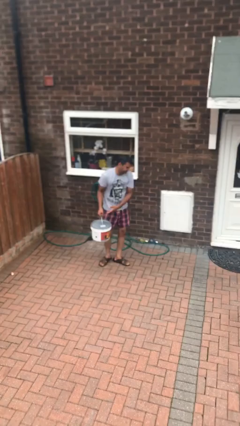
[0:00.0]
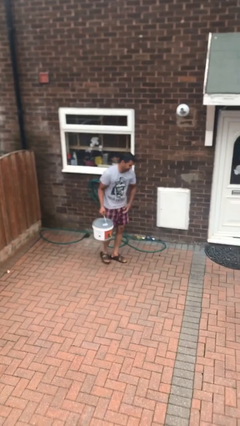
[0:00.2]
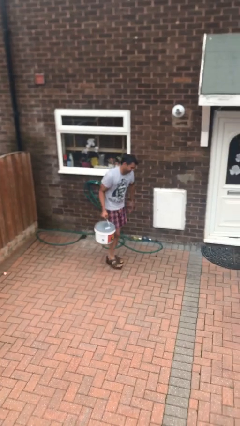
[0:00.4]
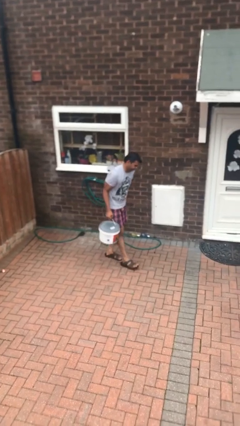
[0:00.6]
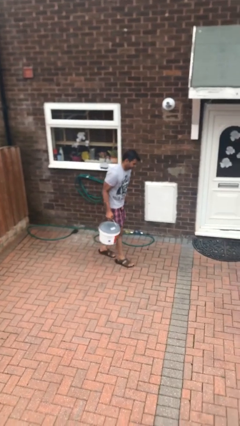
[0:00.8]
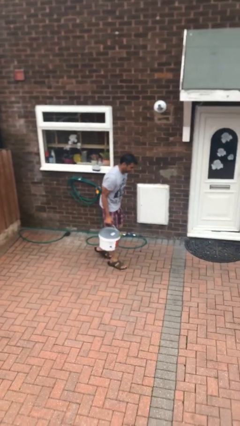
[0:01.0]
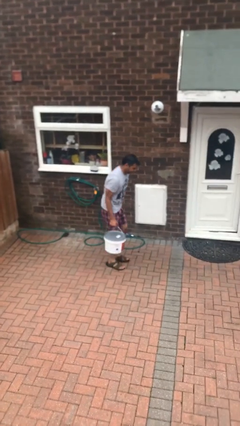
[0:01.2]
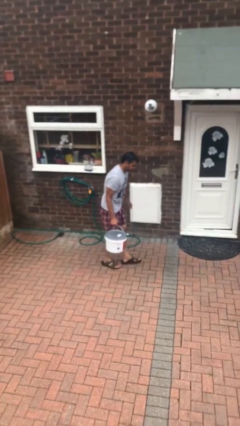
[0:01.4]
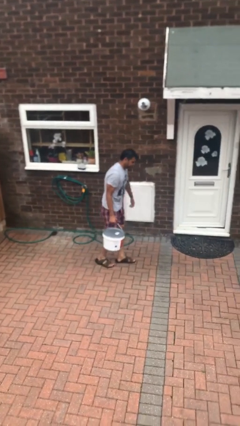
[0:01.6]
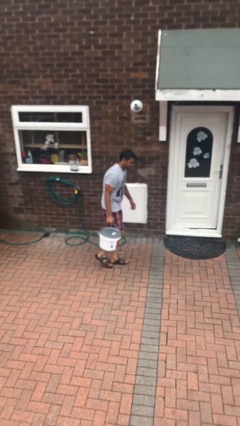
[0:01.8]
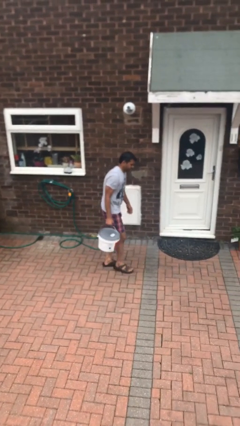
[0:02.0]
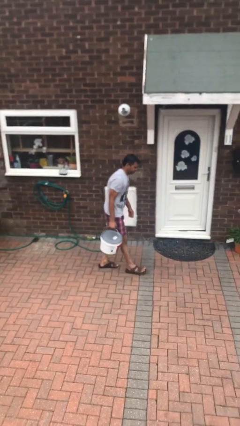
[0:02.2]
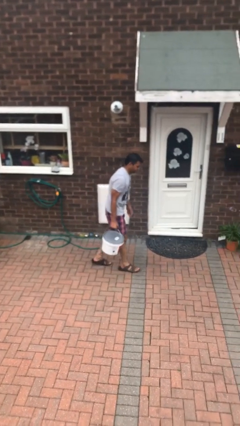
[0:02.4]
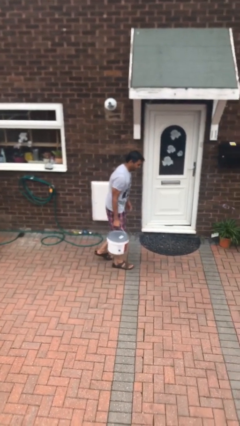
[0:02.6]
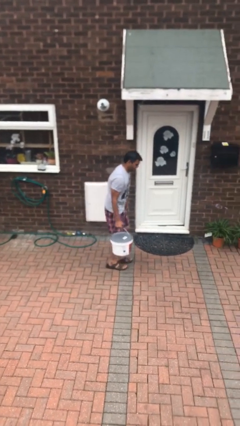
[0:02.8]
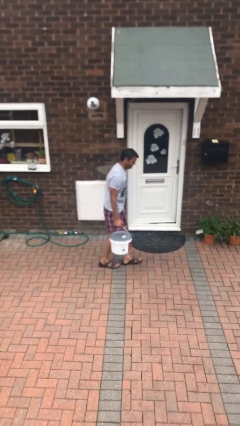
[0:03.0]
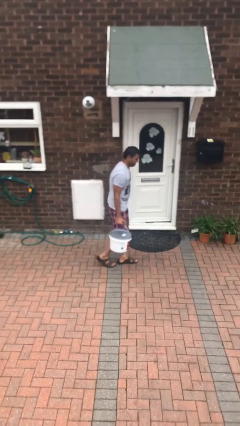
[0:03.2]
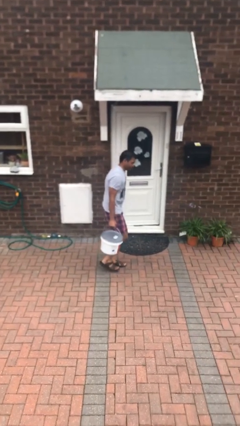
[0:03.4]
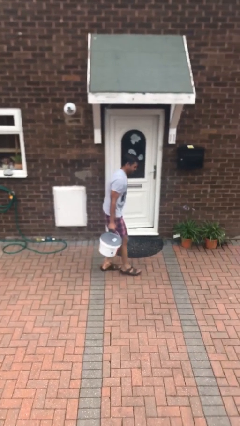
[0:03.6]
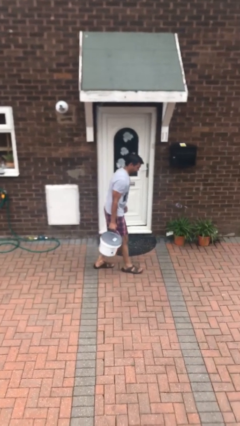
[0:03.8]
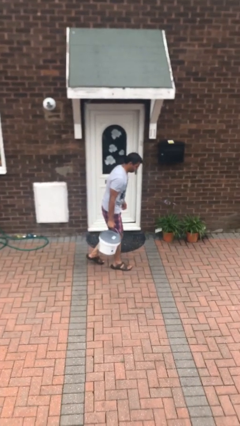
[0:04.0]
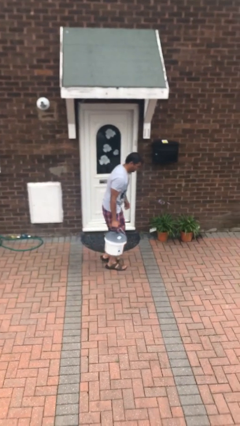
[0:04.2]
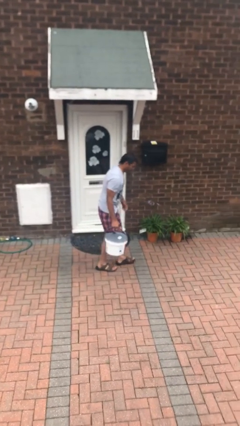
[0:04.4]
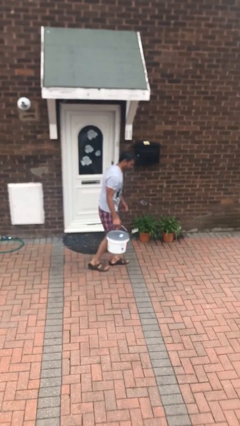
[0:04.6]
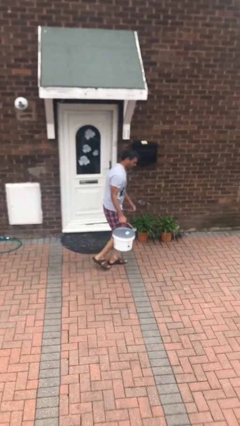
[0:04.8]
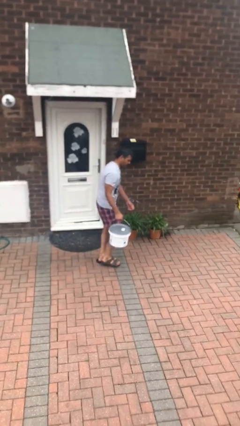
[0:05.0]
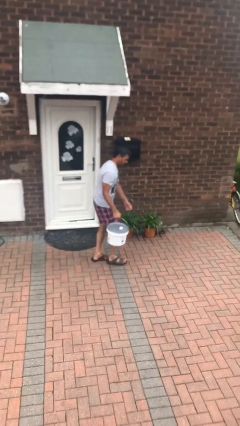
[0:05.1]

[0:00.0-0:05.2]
person carries heavy object

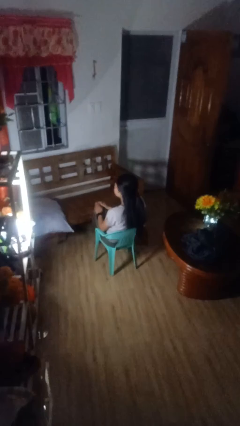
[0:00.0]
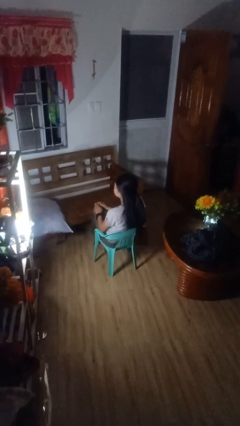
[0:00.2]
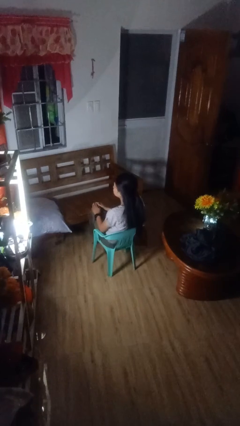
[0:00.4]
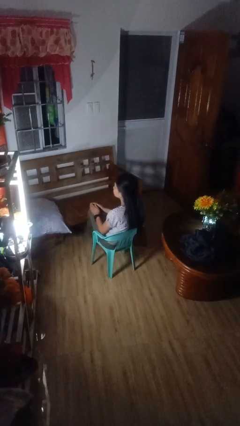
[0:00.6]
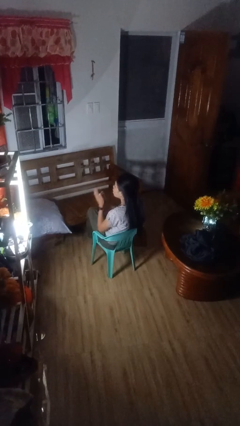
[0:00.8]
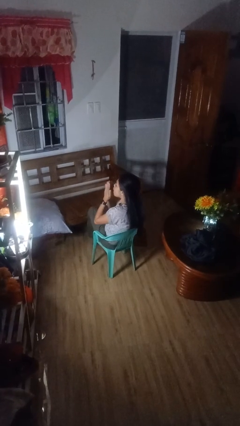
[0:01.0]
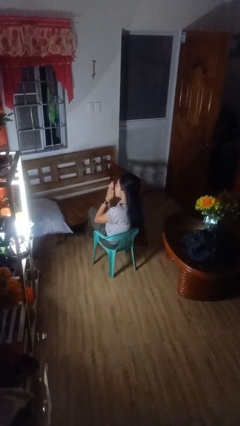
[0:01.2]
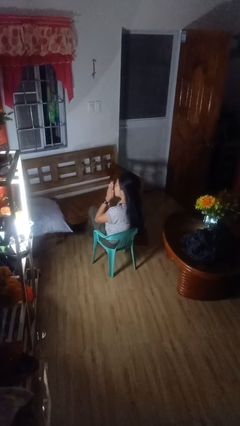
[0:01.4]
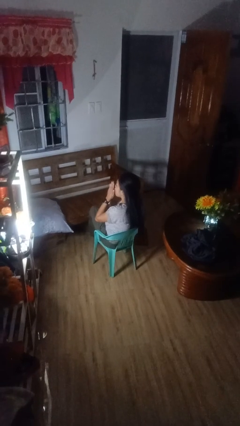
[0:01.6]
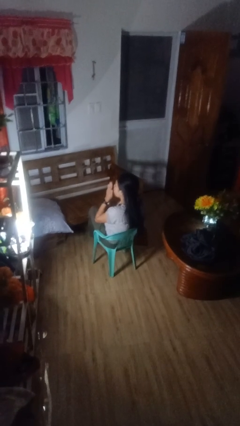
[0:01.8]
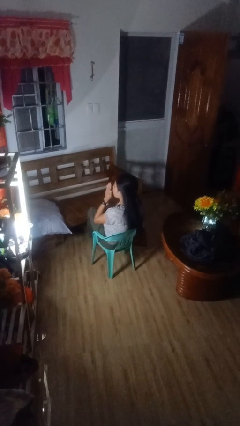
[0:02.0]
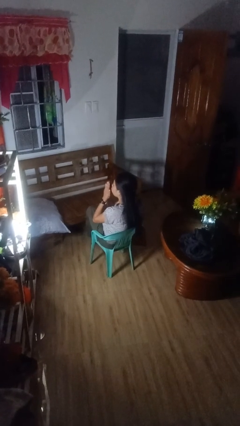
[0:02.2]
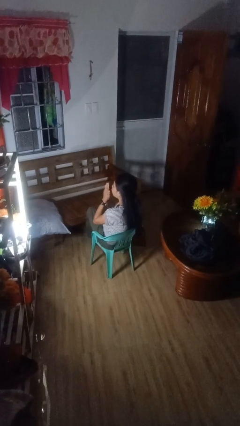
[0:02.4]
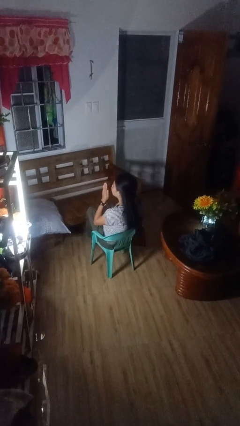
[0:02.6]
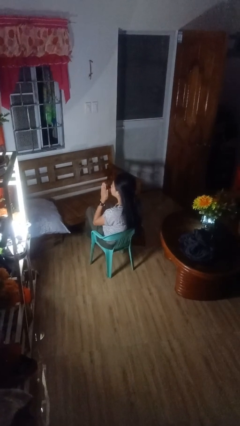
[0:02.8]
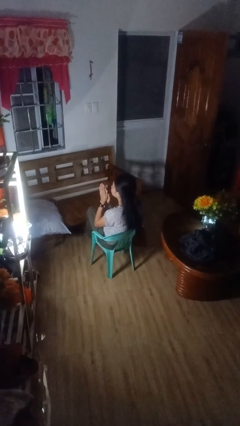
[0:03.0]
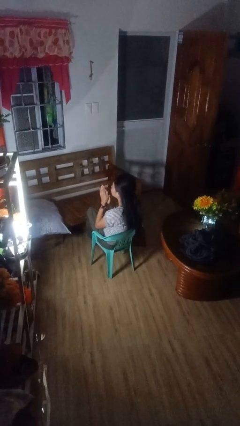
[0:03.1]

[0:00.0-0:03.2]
person blows into hands

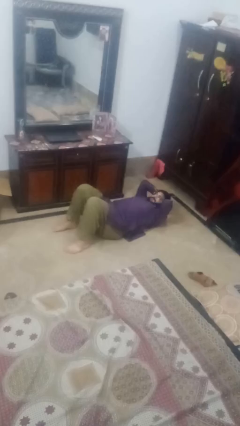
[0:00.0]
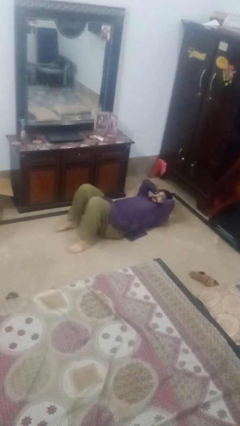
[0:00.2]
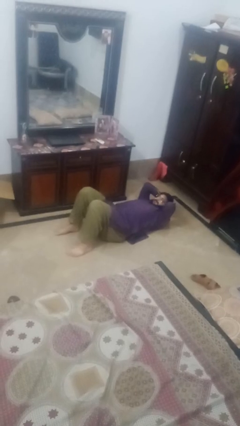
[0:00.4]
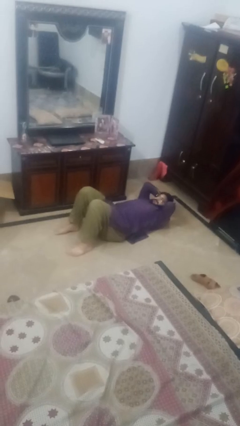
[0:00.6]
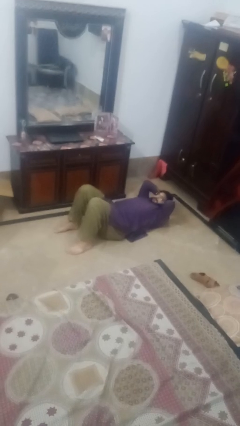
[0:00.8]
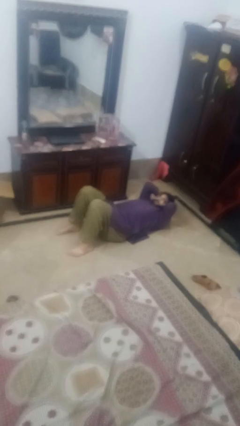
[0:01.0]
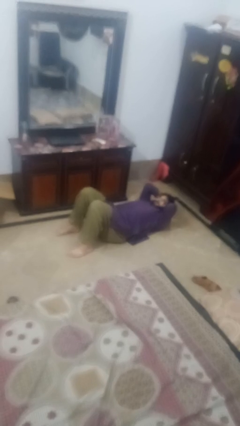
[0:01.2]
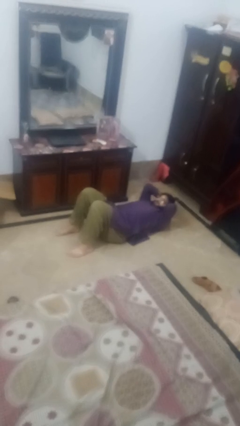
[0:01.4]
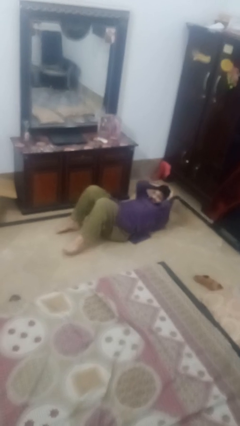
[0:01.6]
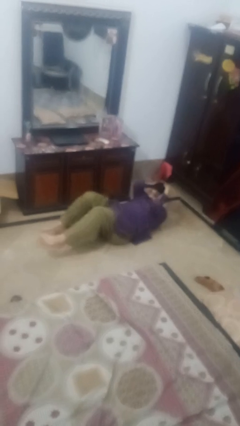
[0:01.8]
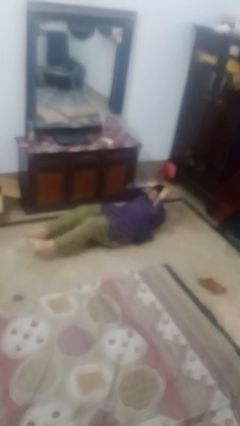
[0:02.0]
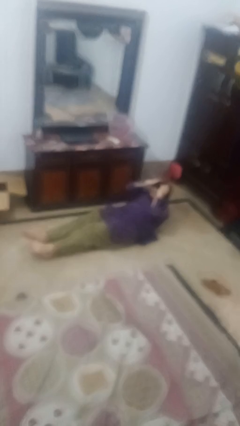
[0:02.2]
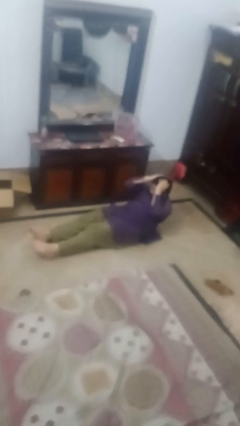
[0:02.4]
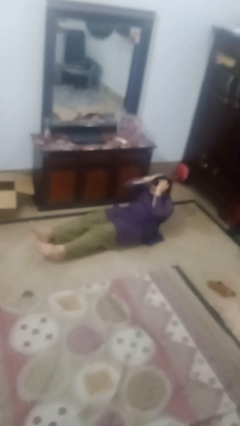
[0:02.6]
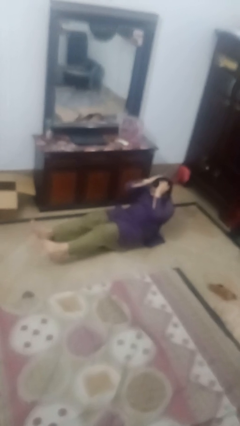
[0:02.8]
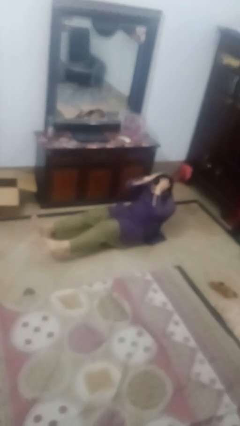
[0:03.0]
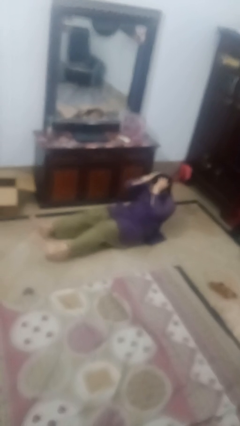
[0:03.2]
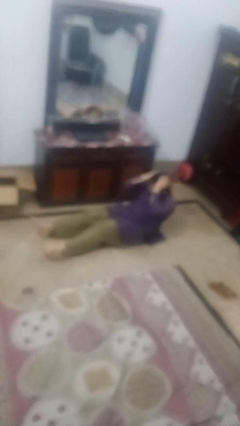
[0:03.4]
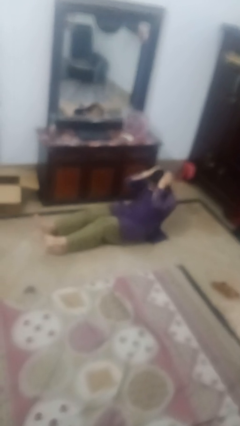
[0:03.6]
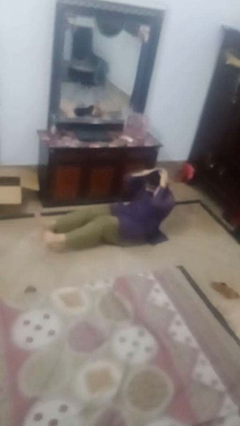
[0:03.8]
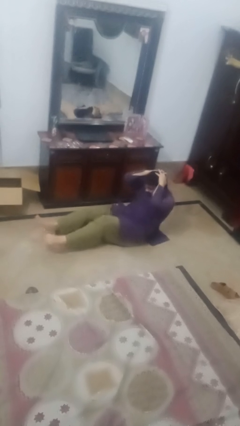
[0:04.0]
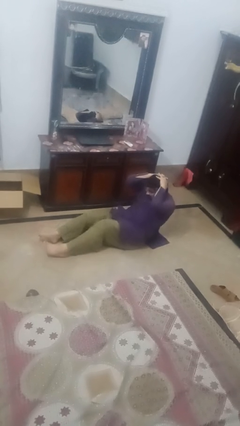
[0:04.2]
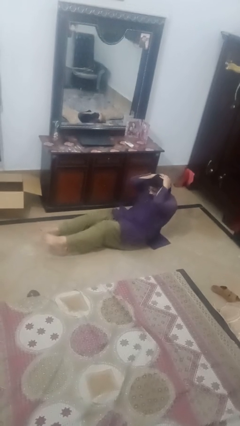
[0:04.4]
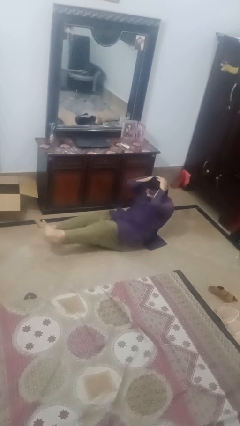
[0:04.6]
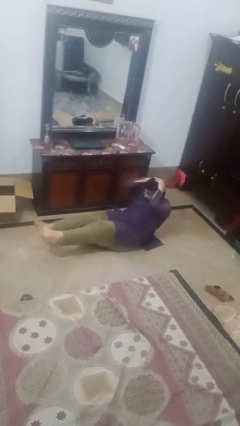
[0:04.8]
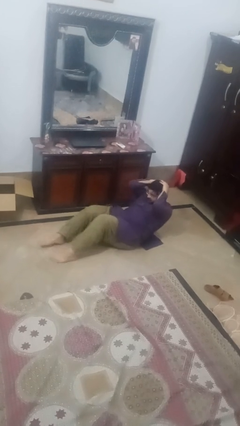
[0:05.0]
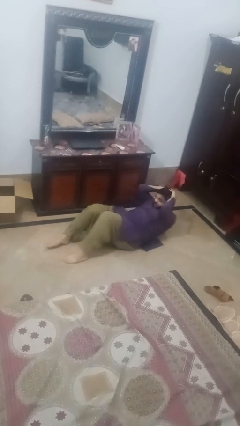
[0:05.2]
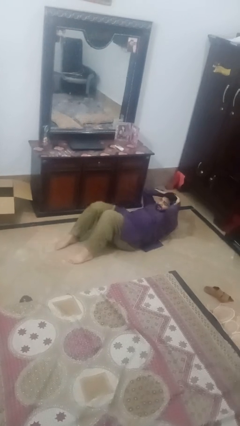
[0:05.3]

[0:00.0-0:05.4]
person exercises with situp

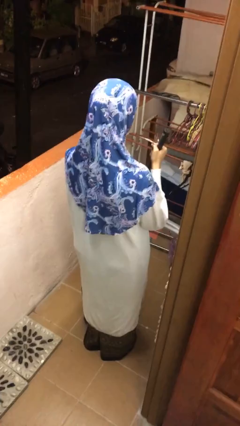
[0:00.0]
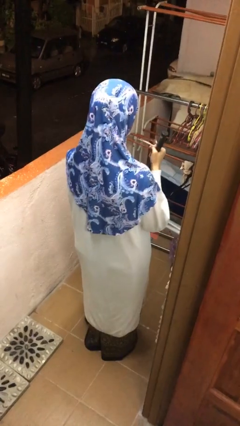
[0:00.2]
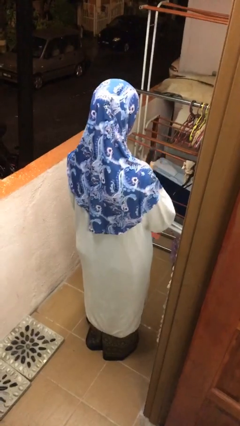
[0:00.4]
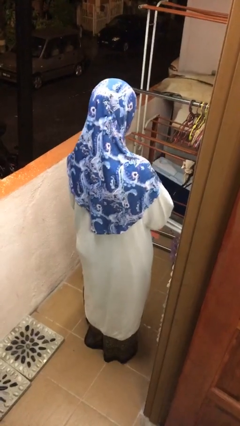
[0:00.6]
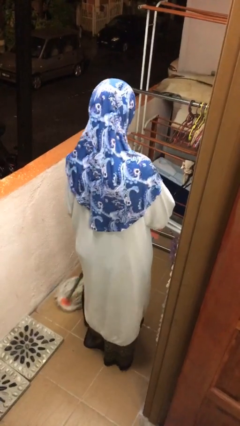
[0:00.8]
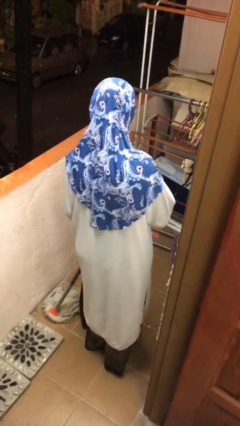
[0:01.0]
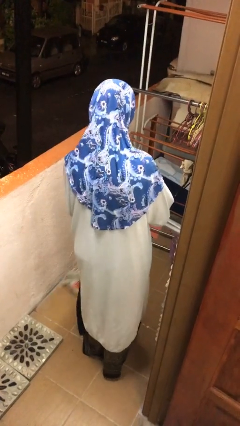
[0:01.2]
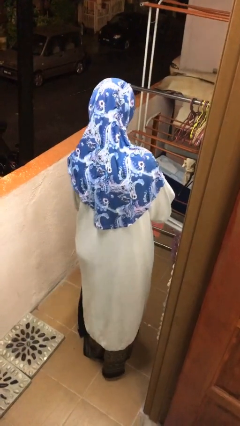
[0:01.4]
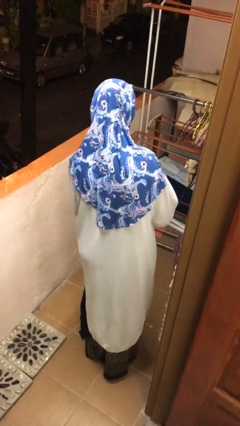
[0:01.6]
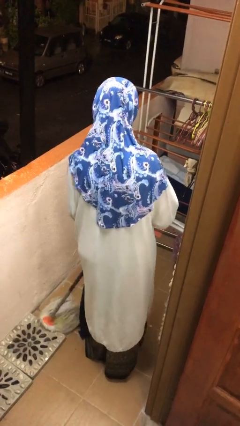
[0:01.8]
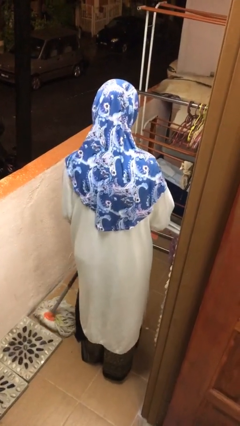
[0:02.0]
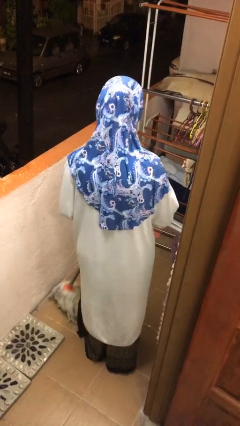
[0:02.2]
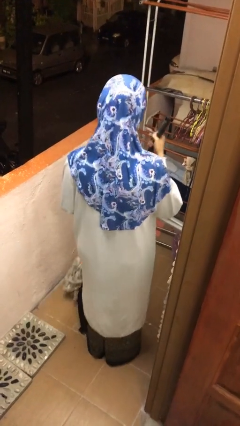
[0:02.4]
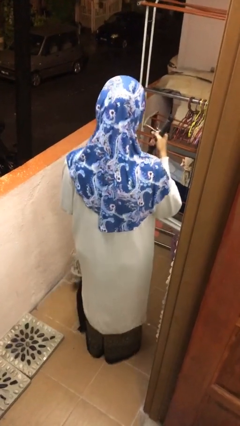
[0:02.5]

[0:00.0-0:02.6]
person mops

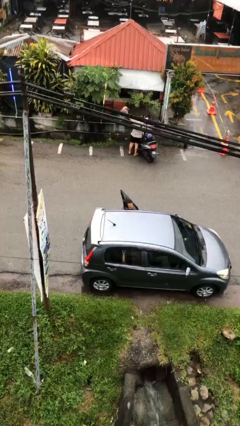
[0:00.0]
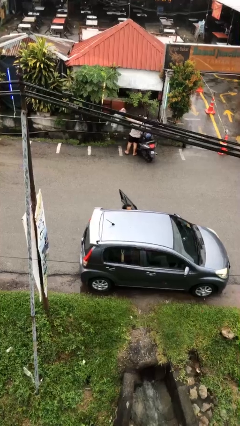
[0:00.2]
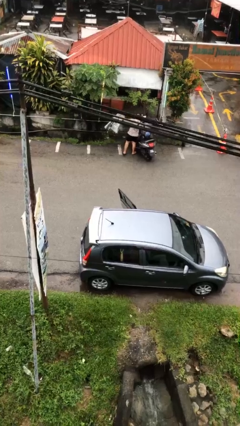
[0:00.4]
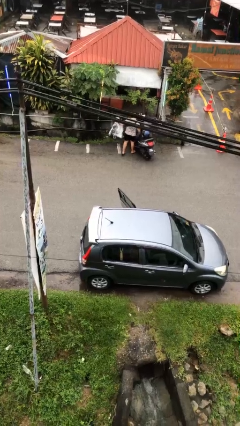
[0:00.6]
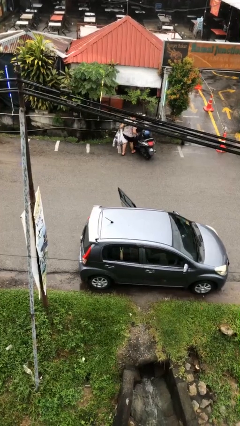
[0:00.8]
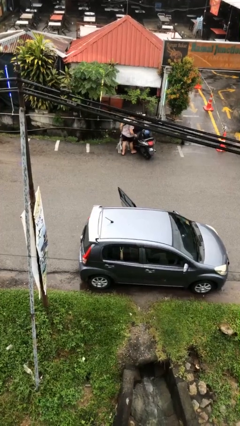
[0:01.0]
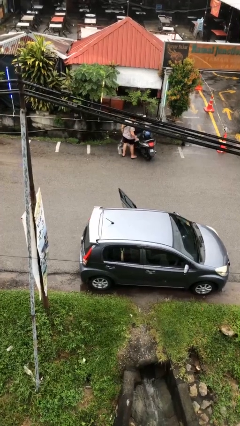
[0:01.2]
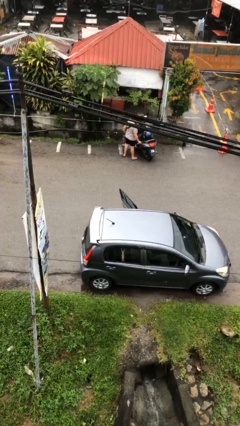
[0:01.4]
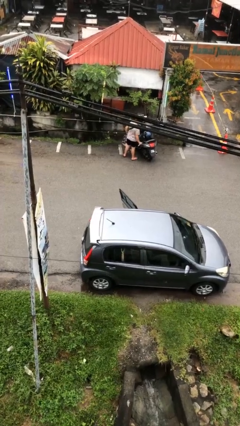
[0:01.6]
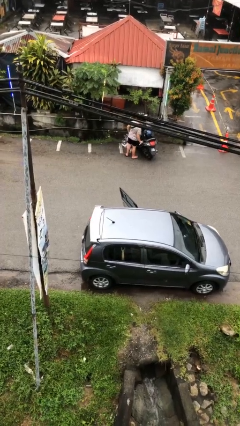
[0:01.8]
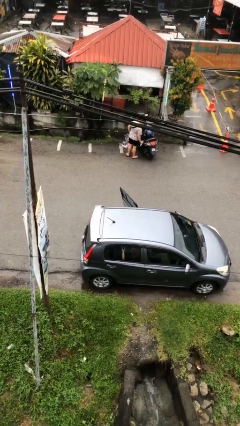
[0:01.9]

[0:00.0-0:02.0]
person enters car
